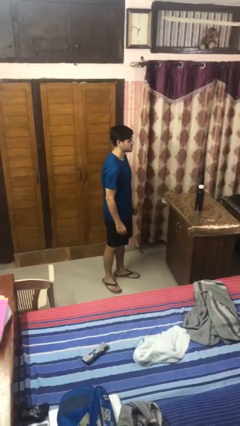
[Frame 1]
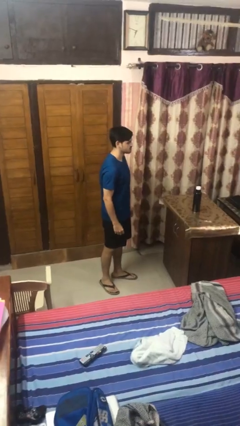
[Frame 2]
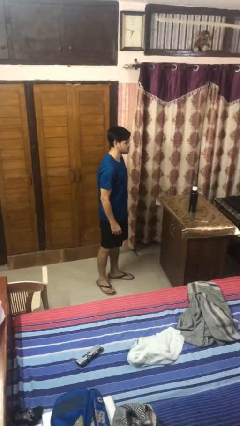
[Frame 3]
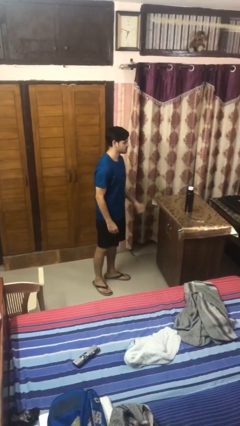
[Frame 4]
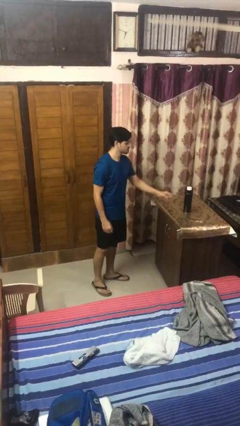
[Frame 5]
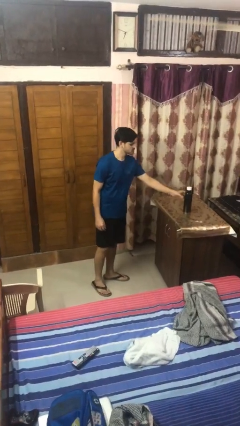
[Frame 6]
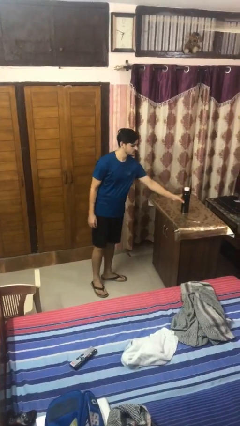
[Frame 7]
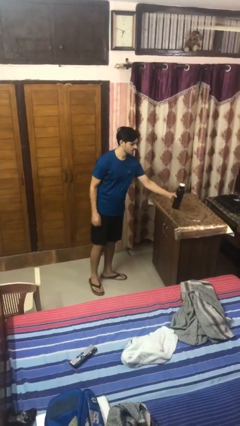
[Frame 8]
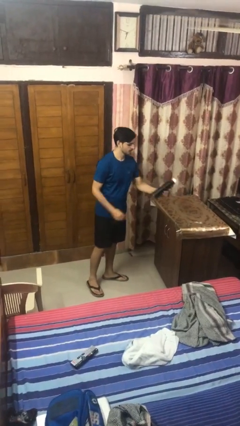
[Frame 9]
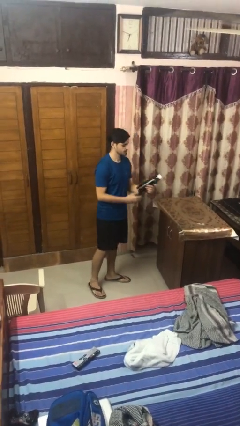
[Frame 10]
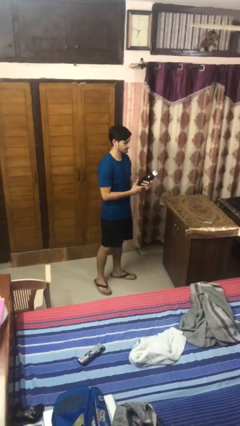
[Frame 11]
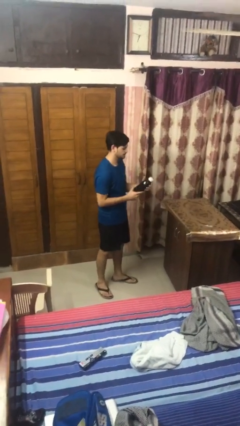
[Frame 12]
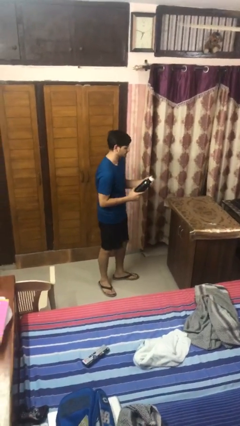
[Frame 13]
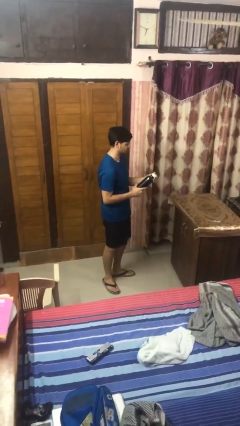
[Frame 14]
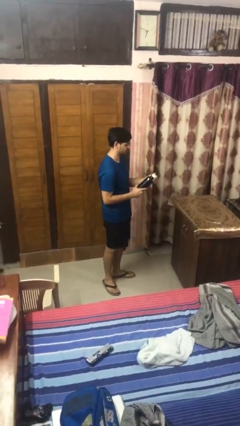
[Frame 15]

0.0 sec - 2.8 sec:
person picks up object from countertop

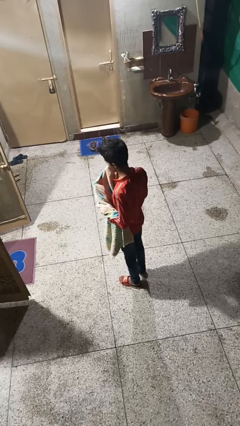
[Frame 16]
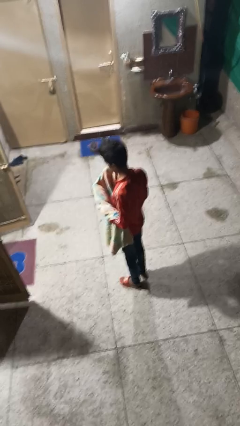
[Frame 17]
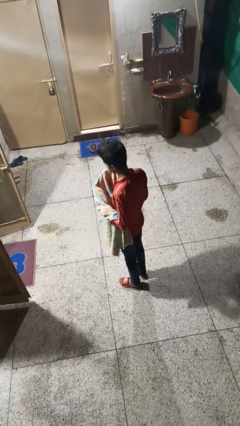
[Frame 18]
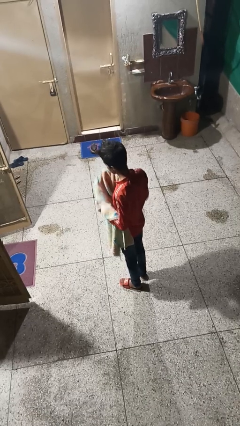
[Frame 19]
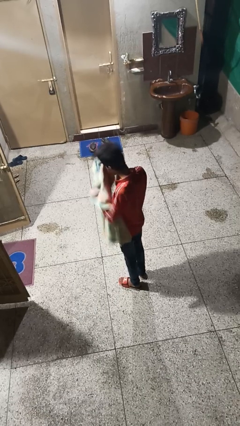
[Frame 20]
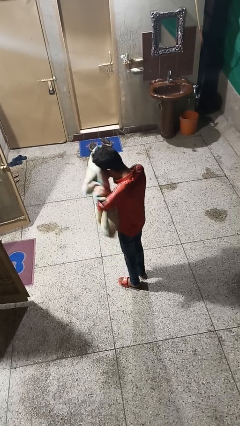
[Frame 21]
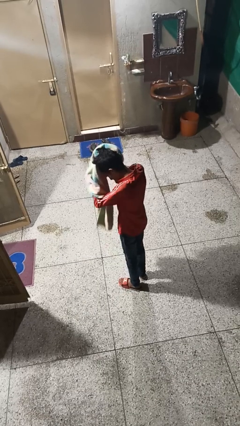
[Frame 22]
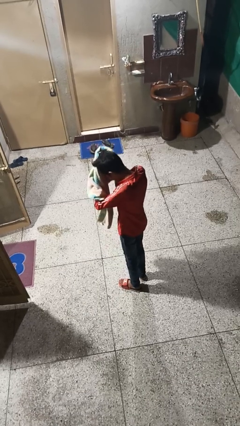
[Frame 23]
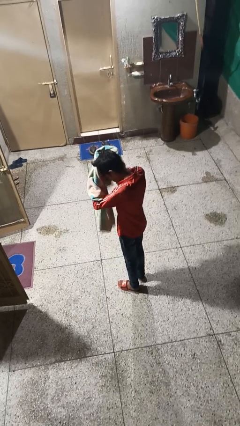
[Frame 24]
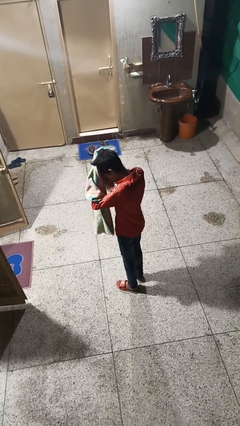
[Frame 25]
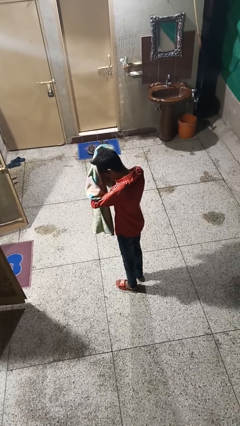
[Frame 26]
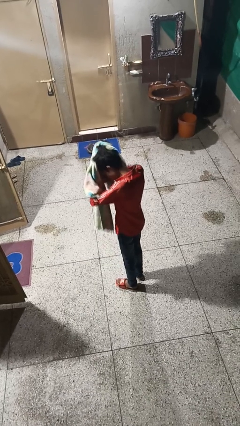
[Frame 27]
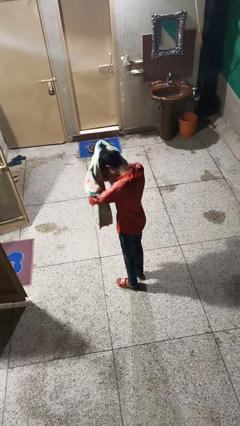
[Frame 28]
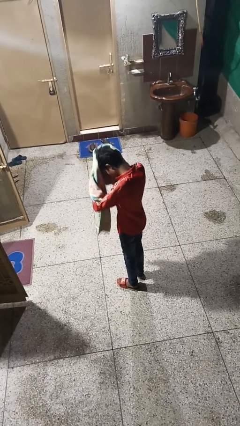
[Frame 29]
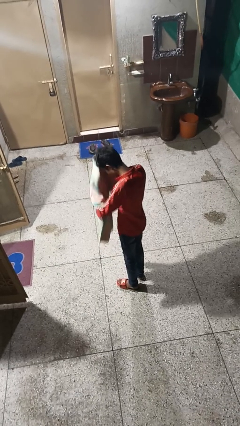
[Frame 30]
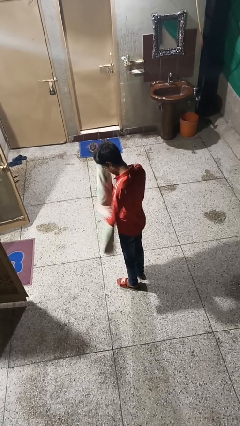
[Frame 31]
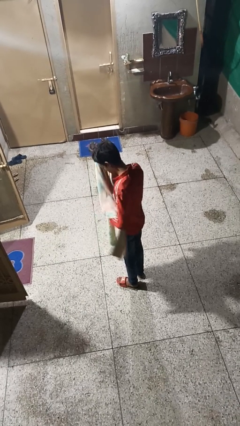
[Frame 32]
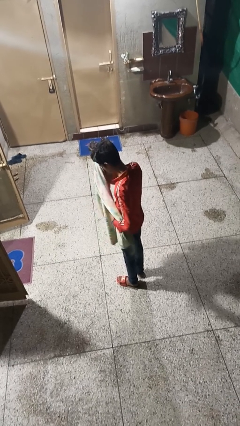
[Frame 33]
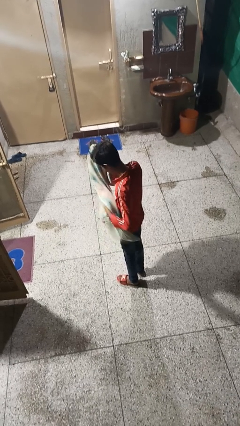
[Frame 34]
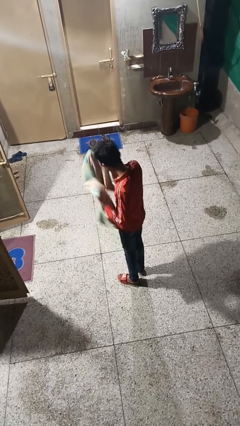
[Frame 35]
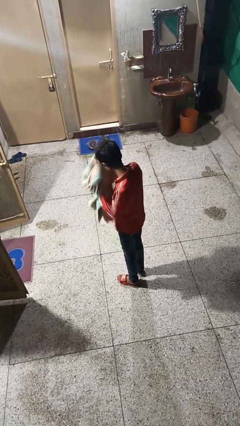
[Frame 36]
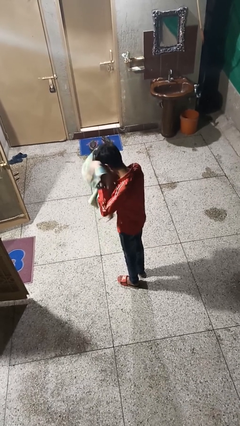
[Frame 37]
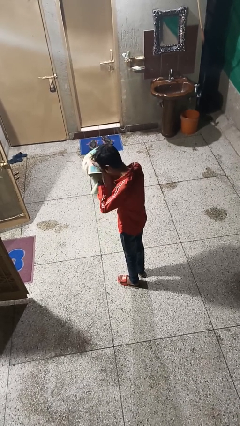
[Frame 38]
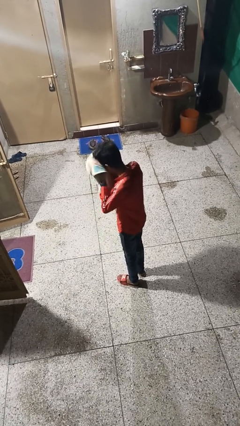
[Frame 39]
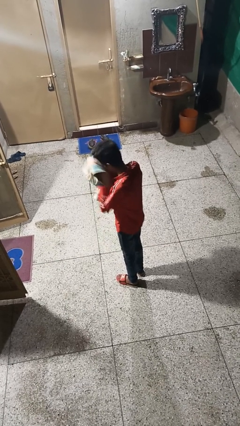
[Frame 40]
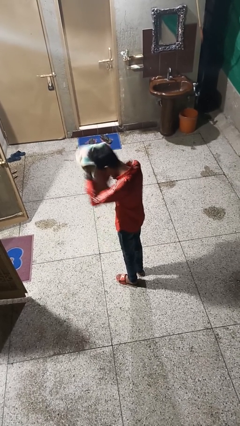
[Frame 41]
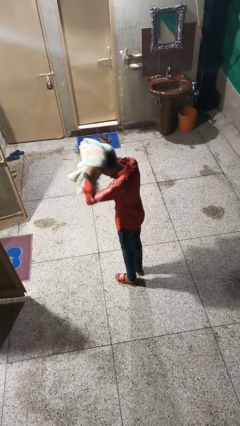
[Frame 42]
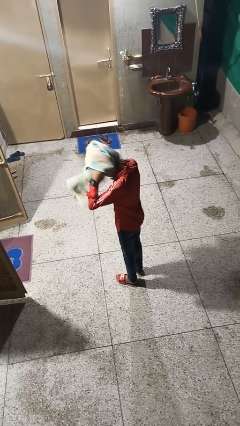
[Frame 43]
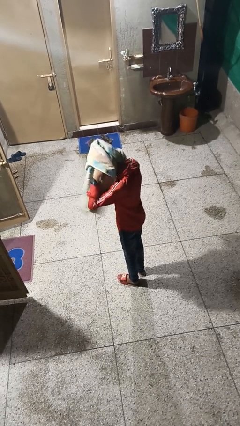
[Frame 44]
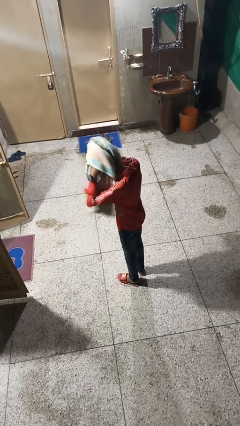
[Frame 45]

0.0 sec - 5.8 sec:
person dries hair with towel

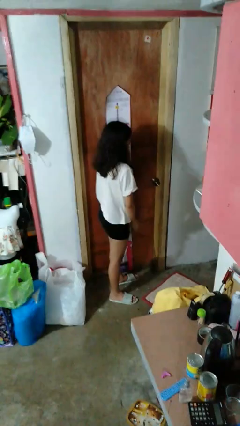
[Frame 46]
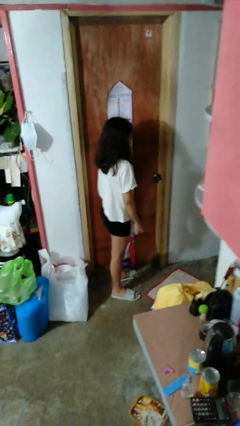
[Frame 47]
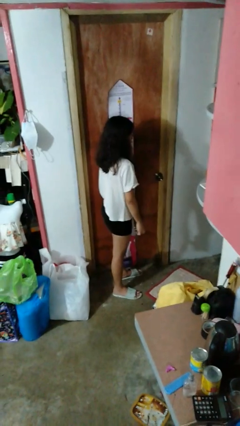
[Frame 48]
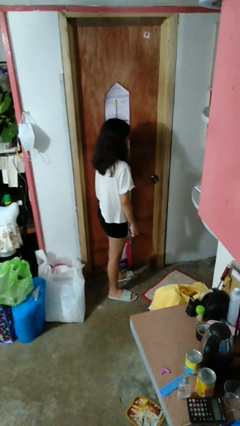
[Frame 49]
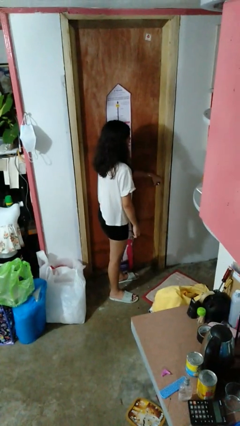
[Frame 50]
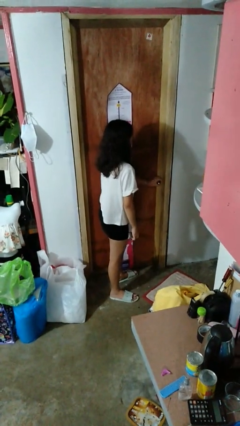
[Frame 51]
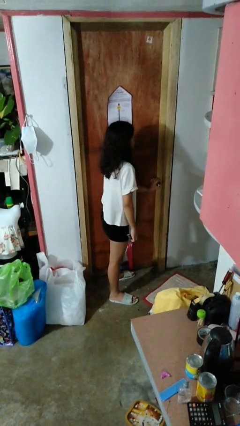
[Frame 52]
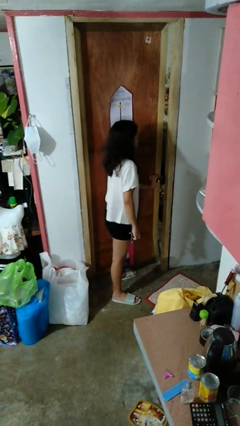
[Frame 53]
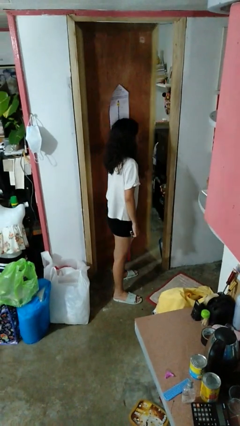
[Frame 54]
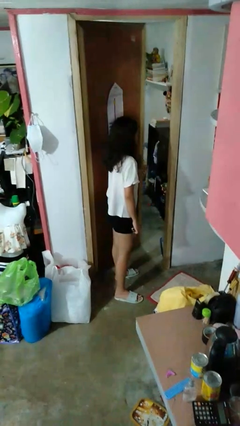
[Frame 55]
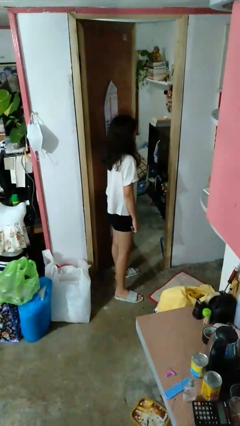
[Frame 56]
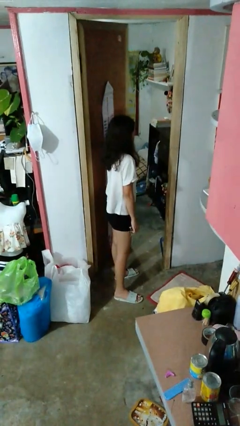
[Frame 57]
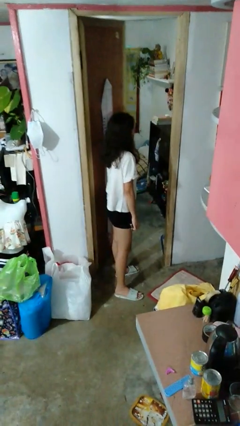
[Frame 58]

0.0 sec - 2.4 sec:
person opens facility door

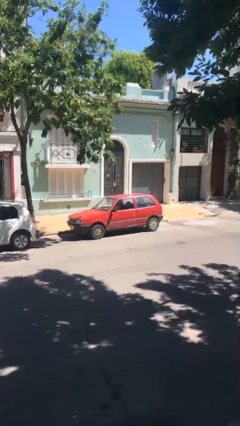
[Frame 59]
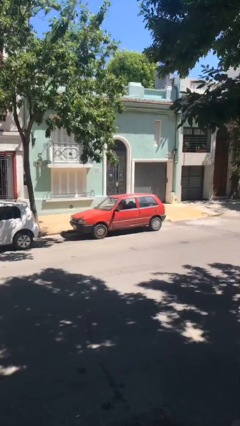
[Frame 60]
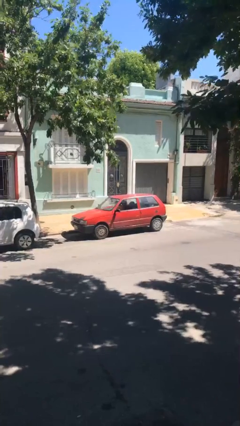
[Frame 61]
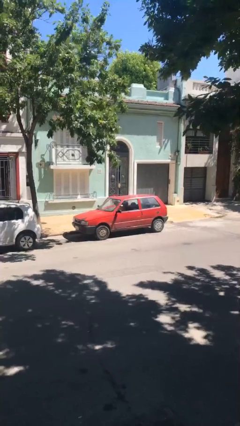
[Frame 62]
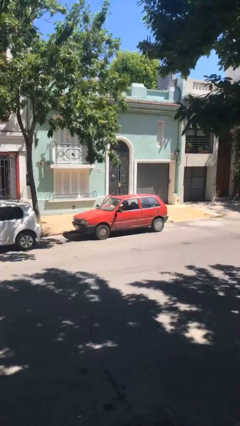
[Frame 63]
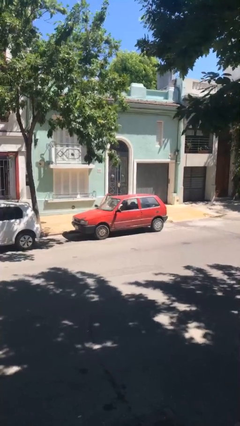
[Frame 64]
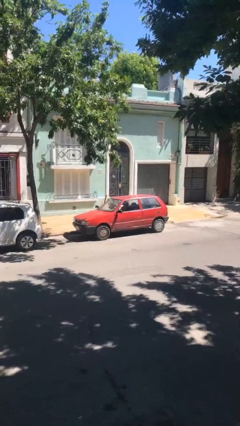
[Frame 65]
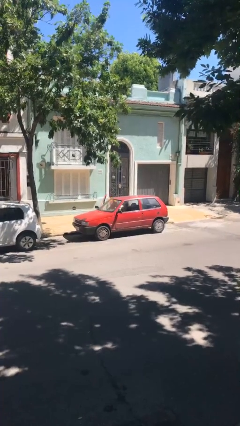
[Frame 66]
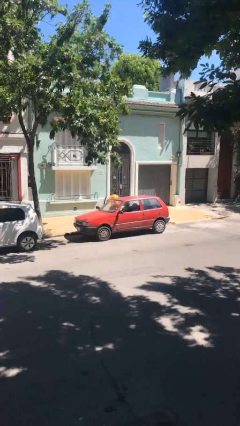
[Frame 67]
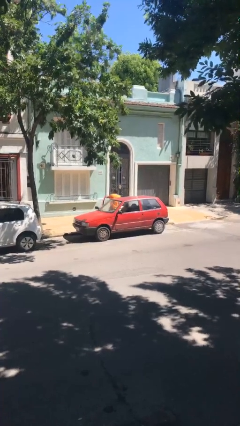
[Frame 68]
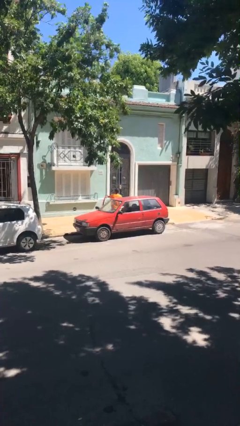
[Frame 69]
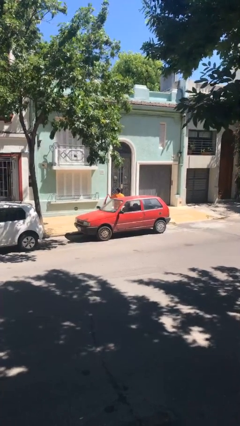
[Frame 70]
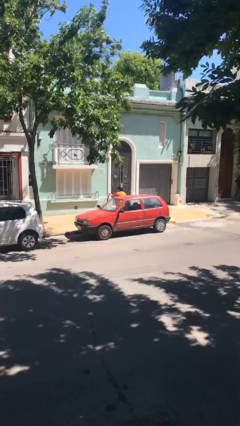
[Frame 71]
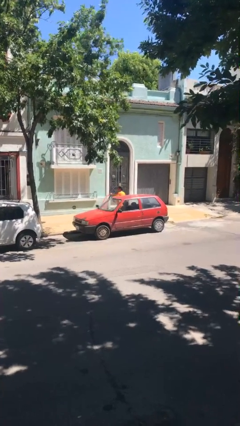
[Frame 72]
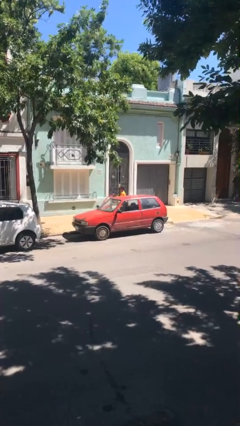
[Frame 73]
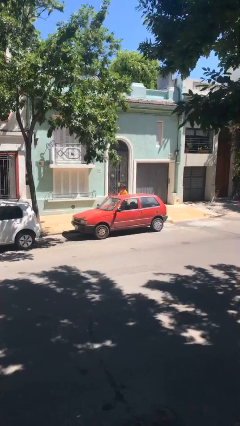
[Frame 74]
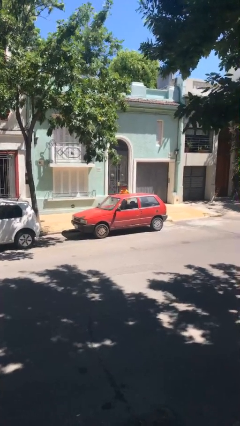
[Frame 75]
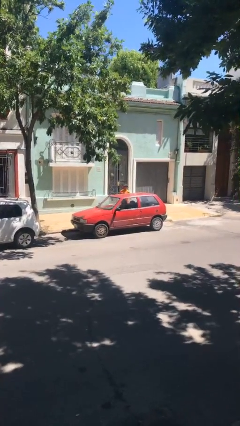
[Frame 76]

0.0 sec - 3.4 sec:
car drops off person

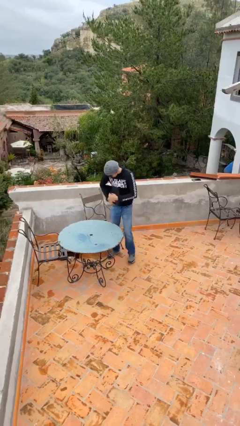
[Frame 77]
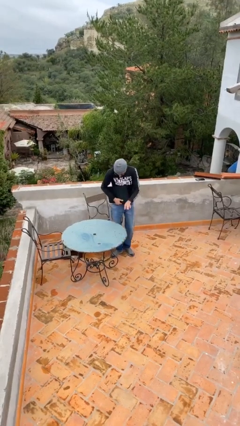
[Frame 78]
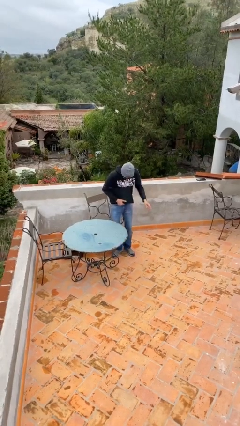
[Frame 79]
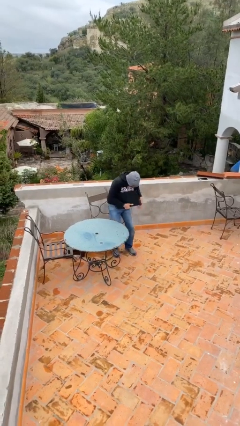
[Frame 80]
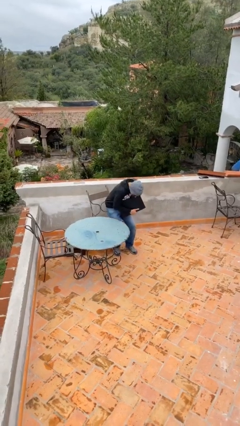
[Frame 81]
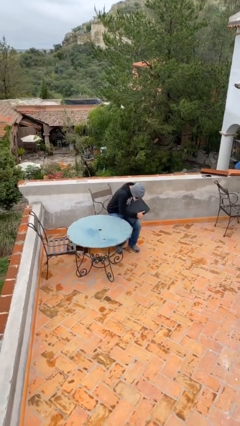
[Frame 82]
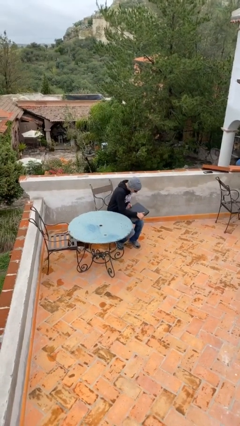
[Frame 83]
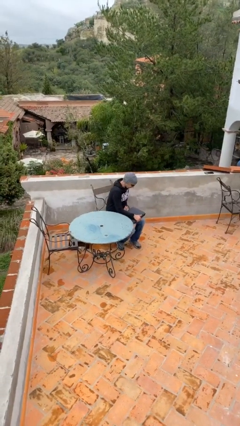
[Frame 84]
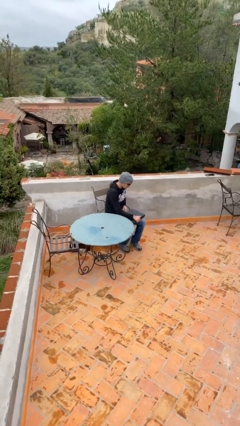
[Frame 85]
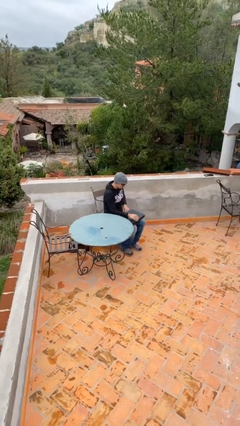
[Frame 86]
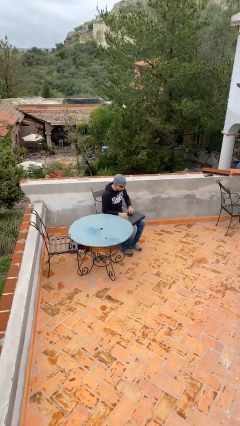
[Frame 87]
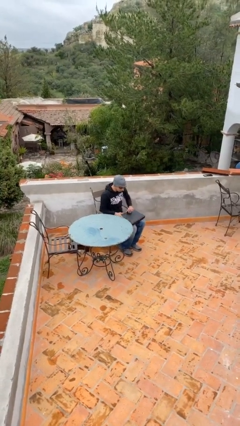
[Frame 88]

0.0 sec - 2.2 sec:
person sits down

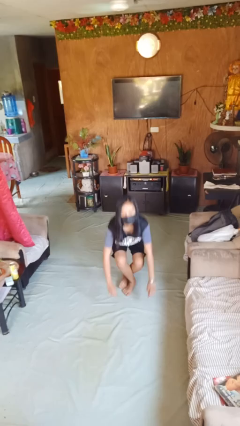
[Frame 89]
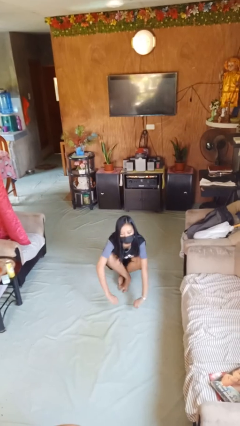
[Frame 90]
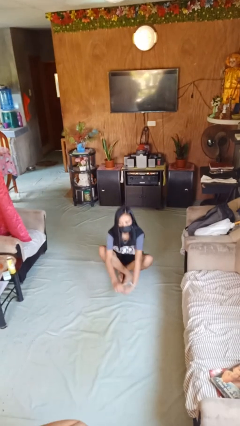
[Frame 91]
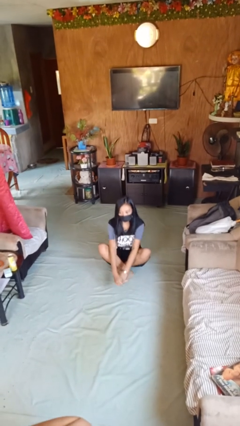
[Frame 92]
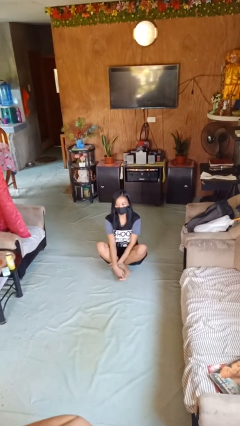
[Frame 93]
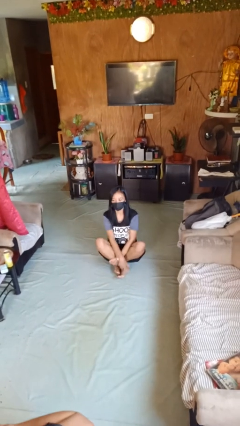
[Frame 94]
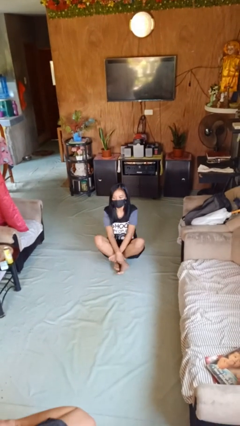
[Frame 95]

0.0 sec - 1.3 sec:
person sits crisscross
